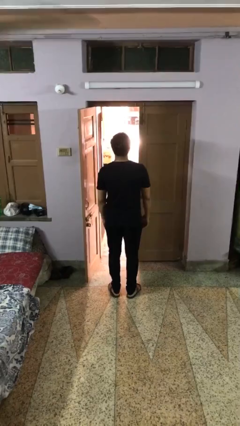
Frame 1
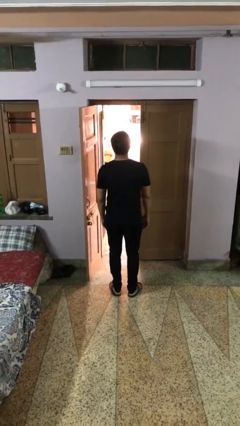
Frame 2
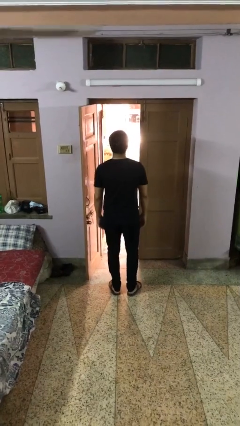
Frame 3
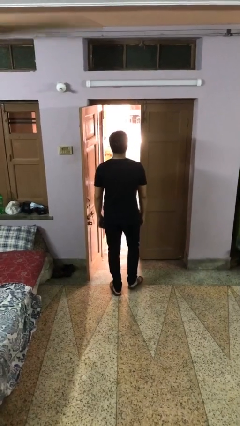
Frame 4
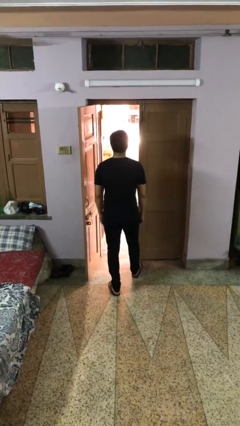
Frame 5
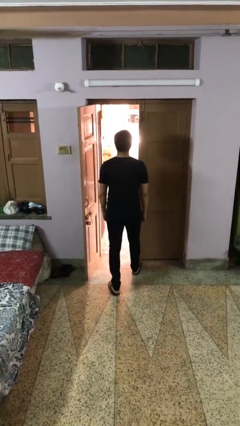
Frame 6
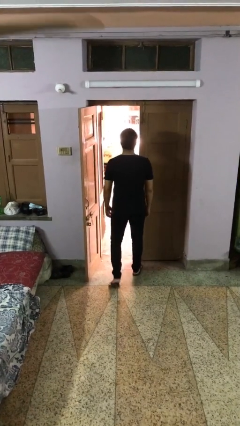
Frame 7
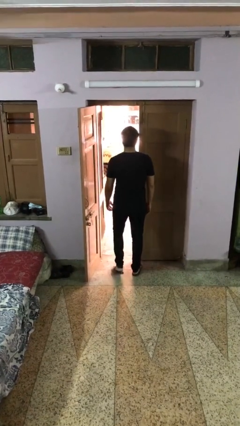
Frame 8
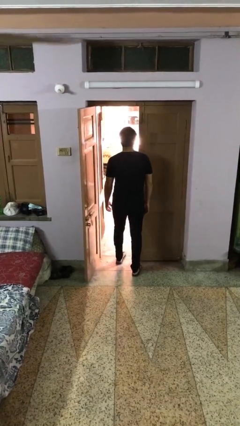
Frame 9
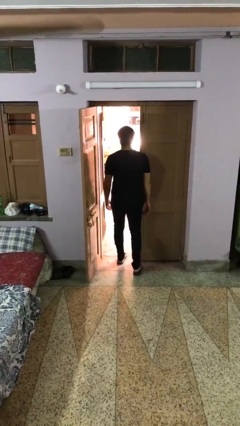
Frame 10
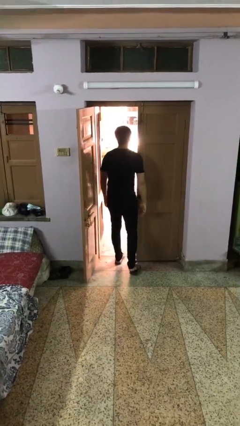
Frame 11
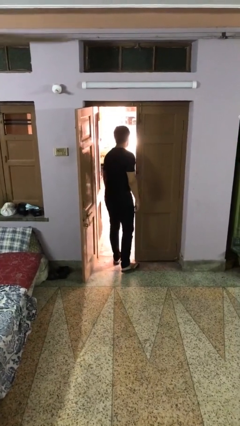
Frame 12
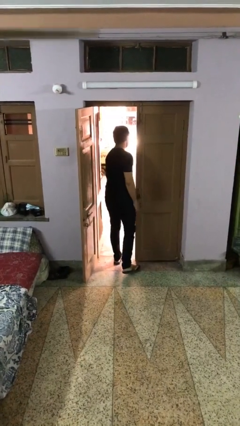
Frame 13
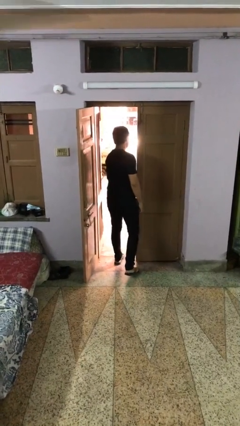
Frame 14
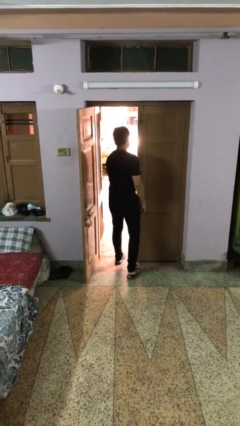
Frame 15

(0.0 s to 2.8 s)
person bumps into wall

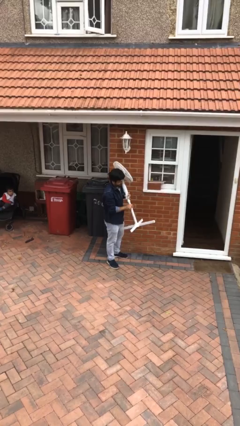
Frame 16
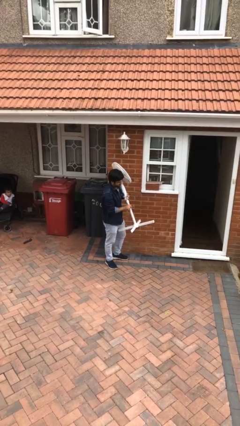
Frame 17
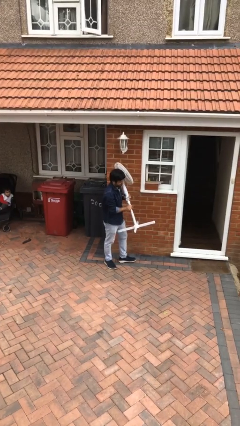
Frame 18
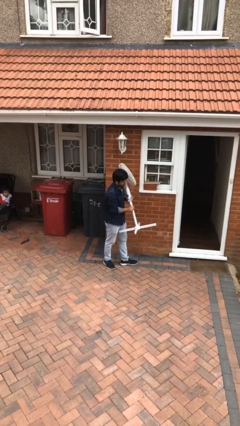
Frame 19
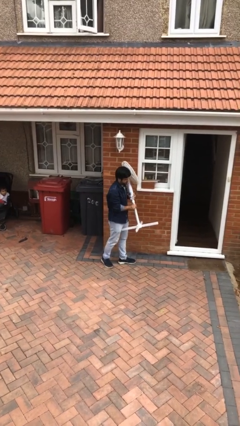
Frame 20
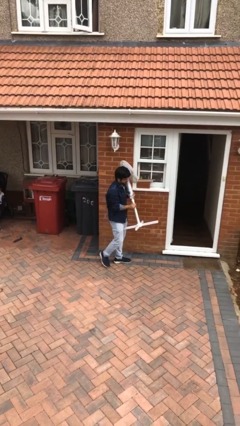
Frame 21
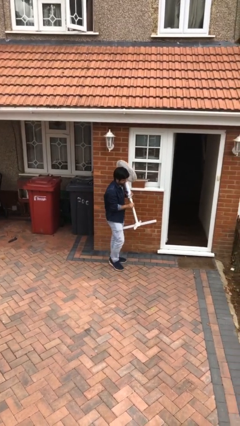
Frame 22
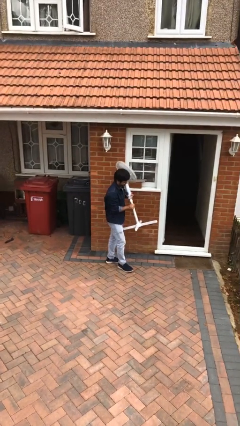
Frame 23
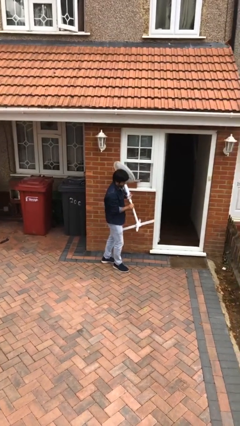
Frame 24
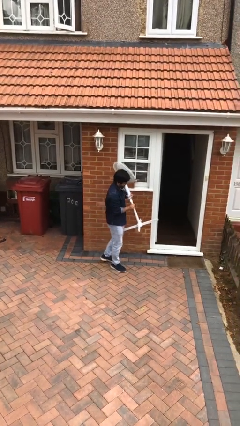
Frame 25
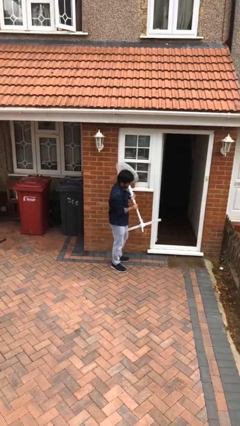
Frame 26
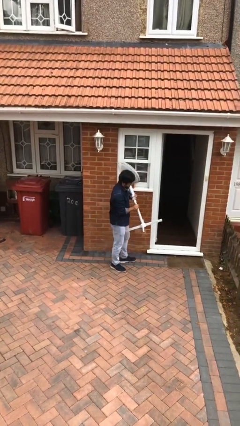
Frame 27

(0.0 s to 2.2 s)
person carries heavy object

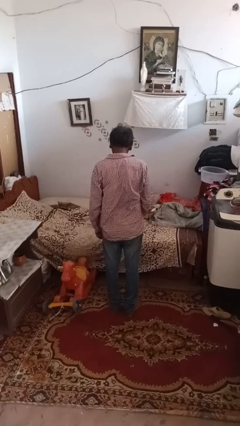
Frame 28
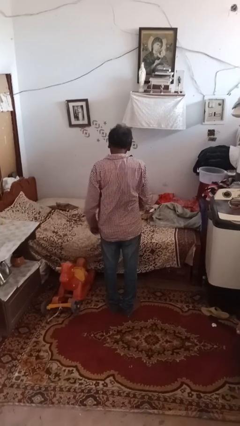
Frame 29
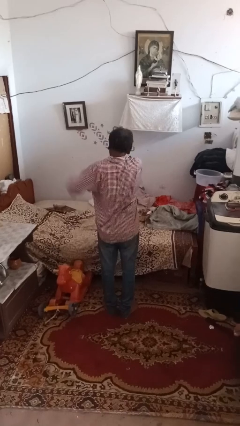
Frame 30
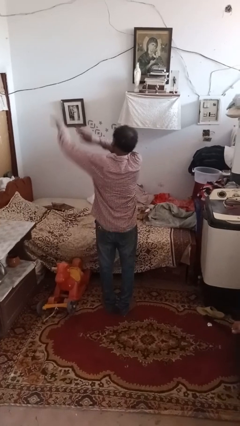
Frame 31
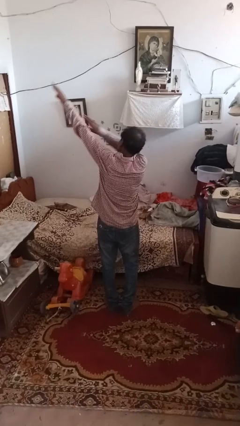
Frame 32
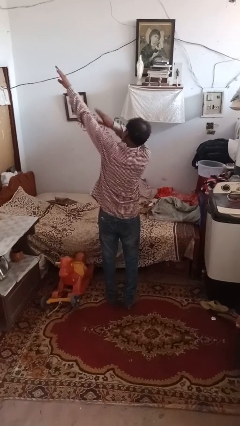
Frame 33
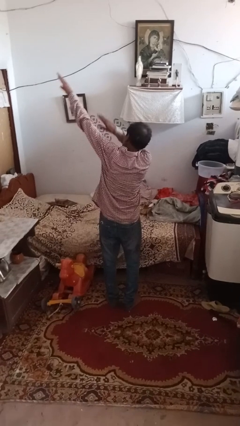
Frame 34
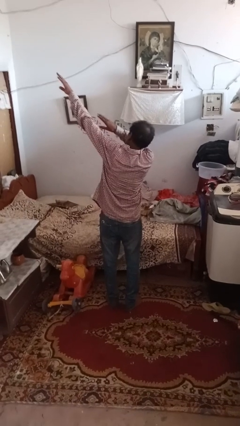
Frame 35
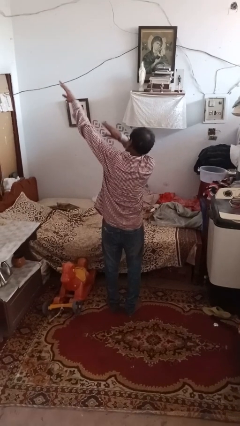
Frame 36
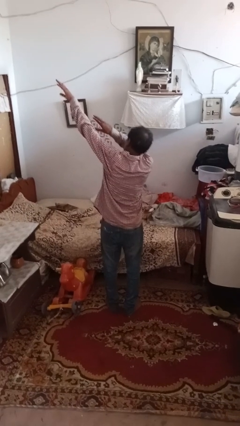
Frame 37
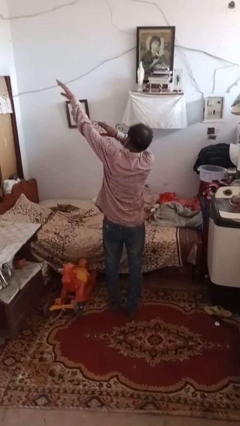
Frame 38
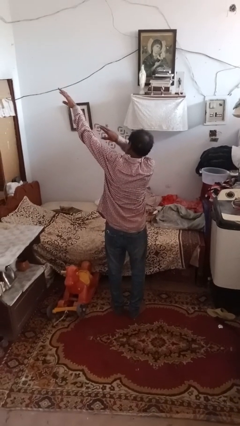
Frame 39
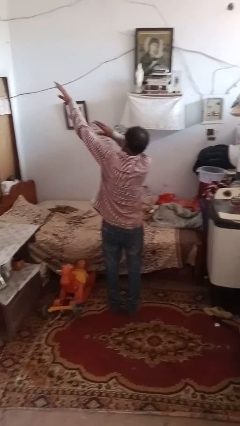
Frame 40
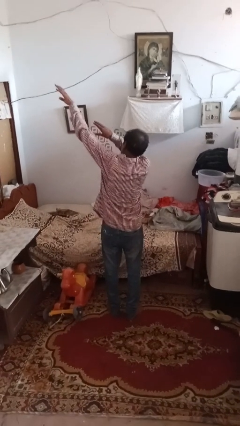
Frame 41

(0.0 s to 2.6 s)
person dances in place

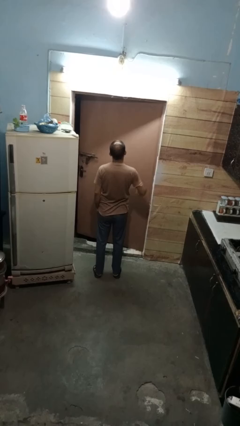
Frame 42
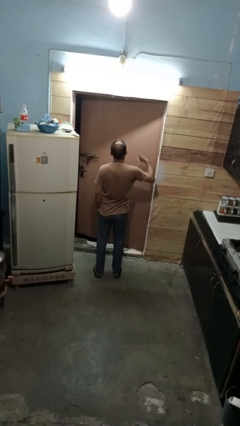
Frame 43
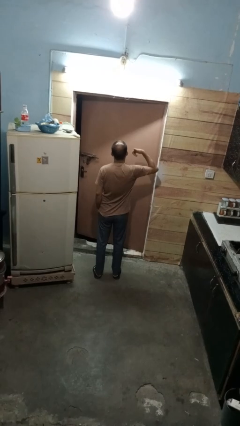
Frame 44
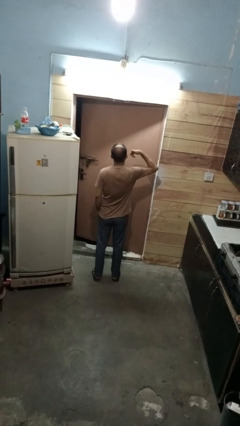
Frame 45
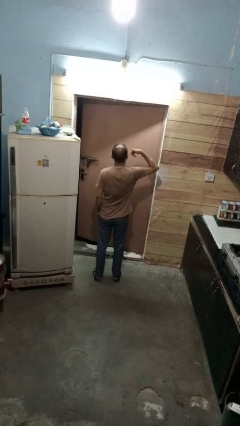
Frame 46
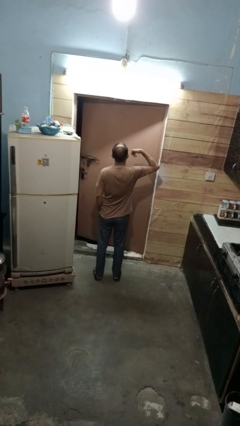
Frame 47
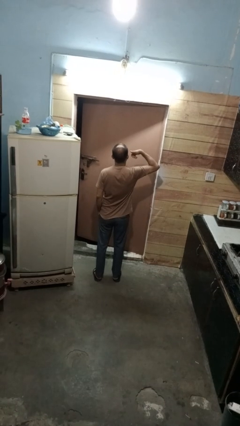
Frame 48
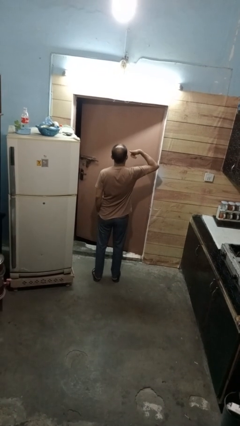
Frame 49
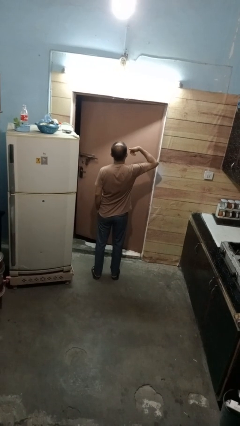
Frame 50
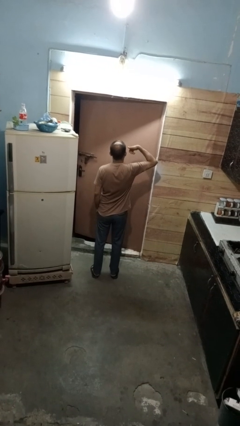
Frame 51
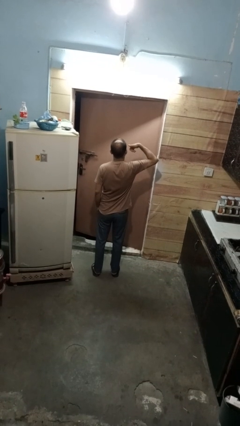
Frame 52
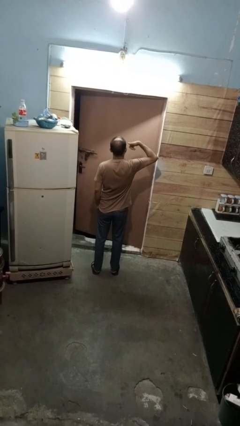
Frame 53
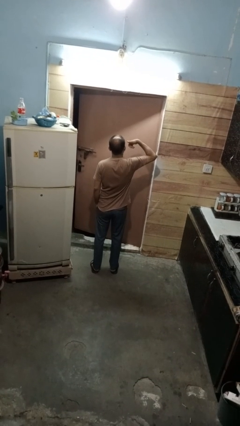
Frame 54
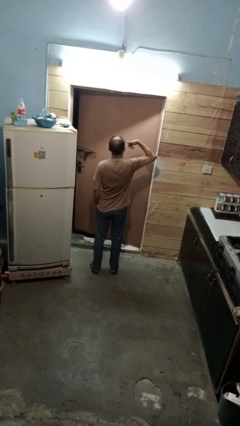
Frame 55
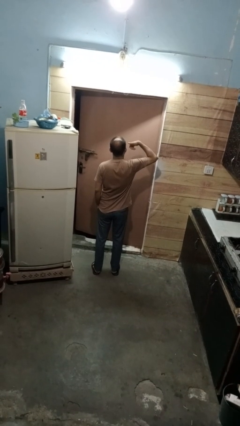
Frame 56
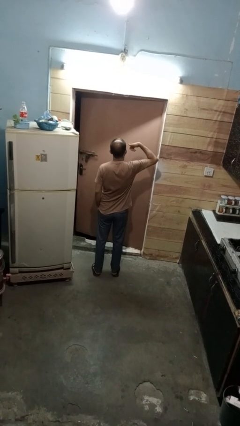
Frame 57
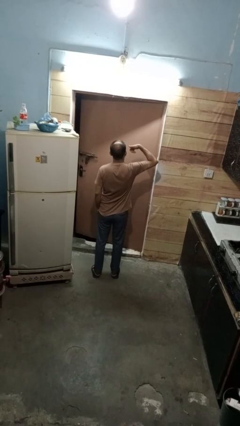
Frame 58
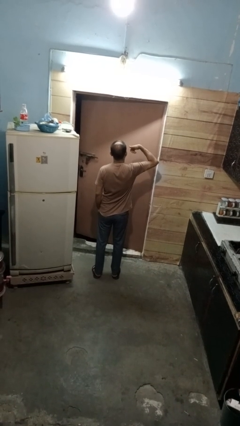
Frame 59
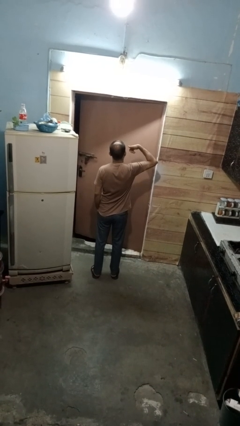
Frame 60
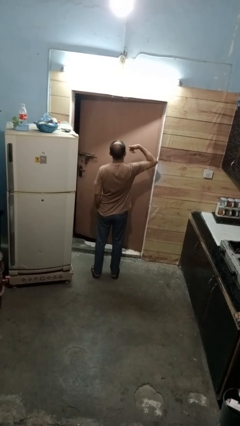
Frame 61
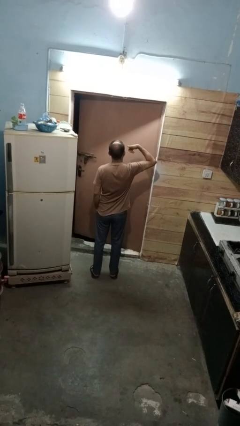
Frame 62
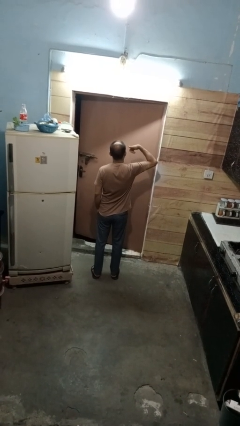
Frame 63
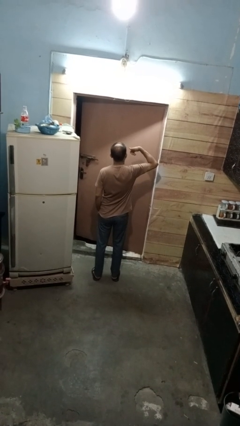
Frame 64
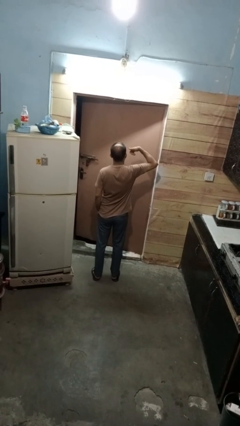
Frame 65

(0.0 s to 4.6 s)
person gestures call me

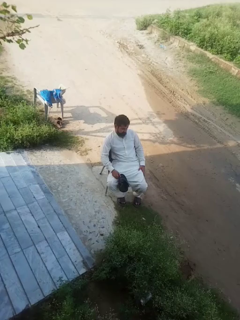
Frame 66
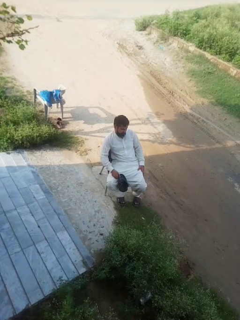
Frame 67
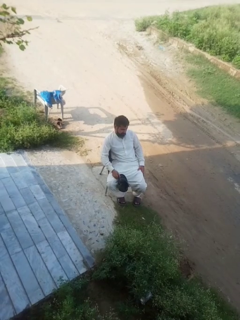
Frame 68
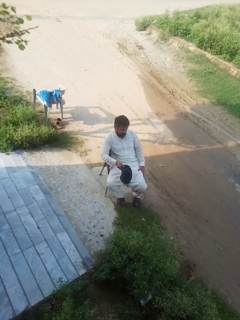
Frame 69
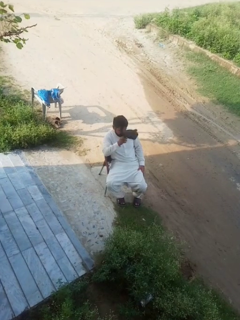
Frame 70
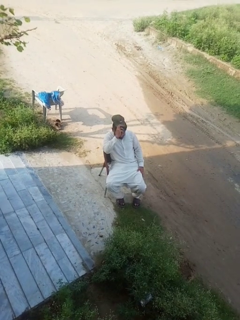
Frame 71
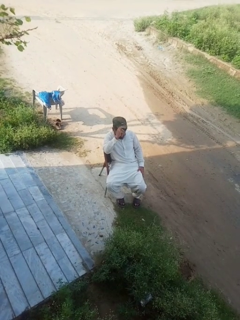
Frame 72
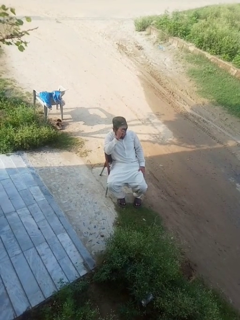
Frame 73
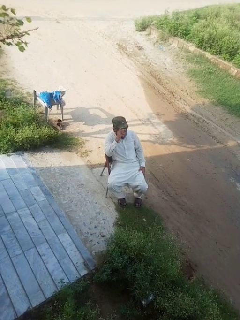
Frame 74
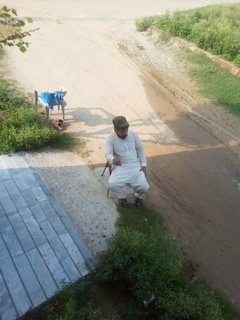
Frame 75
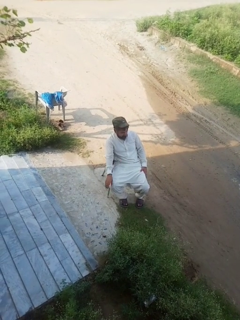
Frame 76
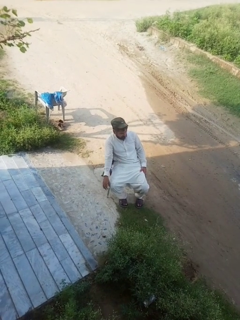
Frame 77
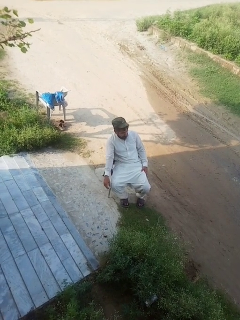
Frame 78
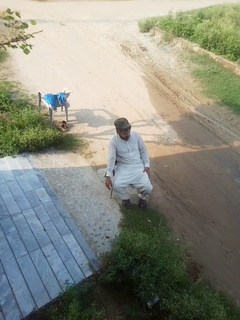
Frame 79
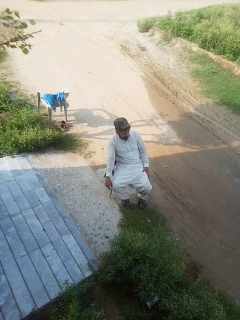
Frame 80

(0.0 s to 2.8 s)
person puts on hat

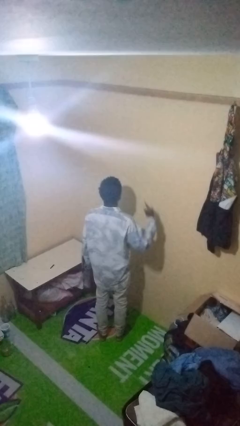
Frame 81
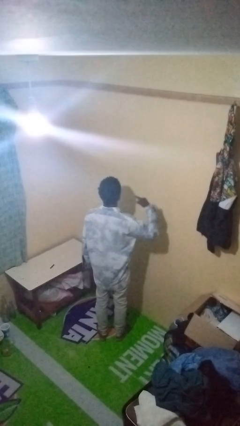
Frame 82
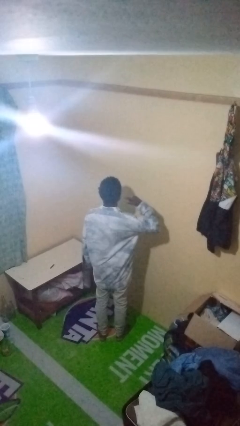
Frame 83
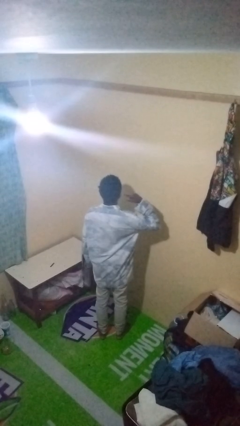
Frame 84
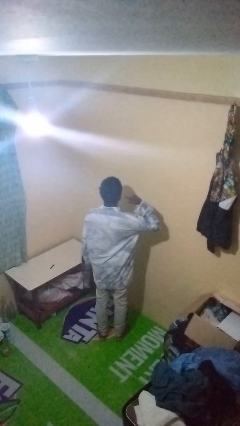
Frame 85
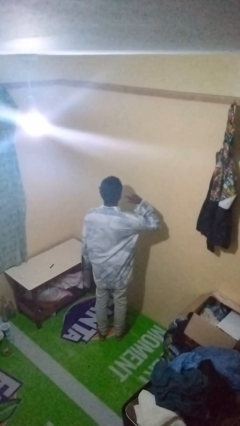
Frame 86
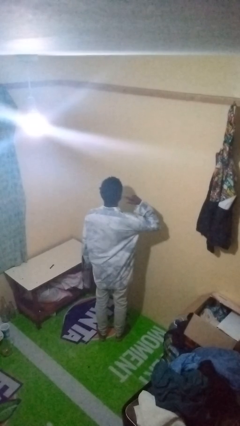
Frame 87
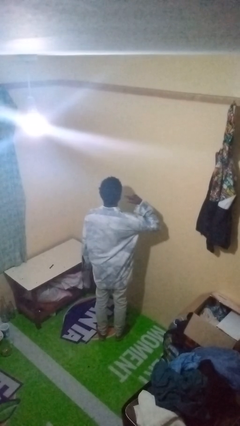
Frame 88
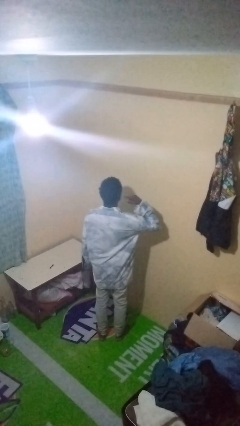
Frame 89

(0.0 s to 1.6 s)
person gestures listen closely

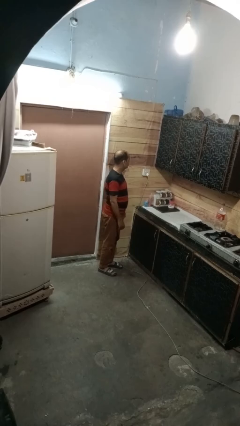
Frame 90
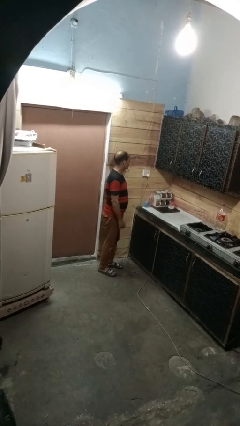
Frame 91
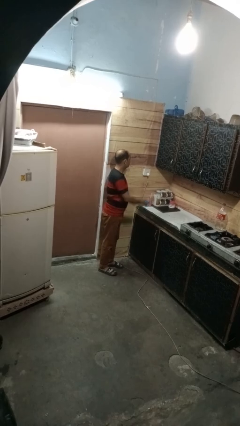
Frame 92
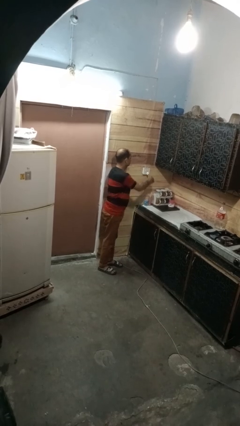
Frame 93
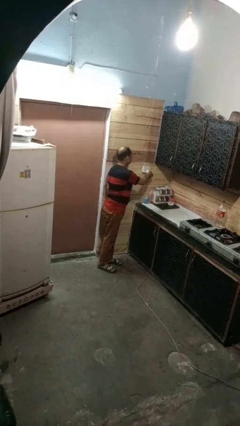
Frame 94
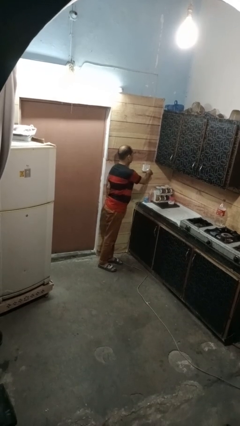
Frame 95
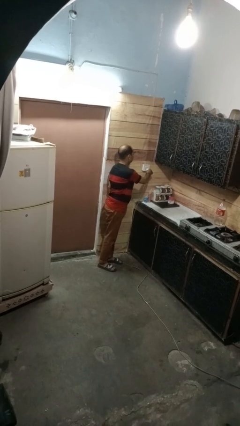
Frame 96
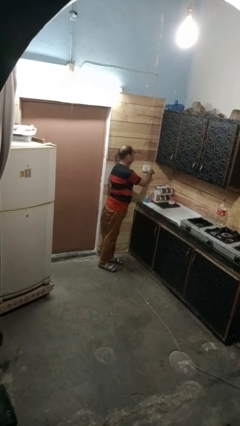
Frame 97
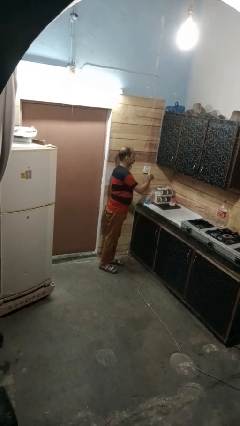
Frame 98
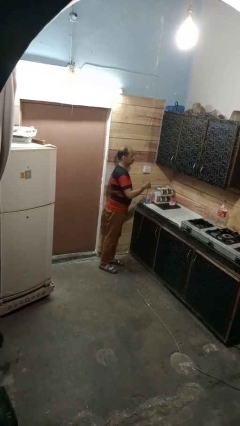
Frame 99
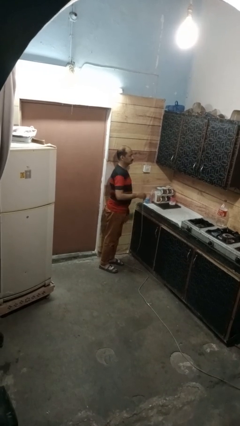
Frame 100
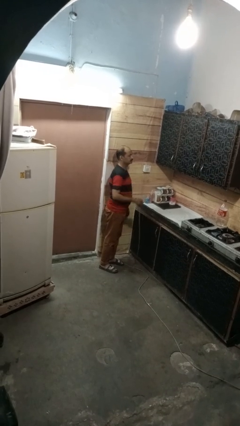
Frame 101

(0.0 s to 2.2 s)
person unplugs from electrical socket
